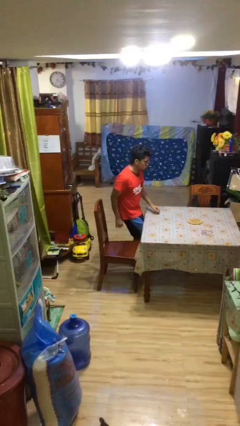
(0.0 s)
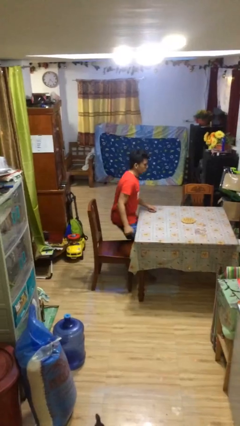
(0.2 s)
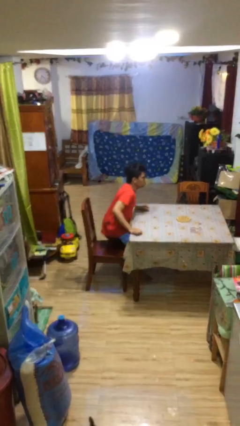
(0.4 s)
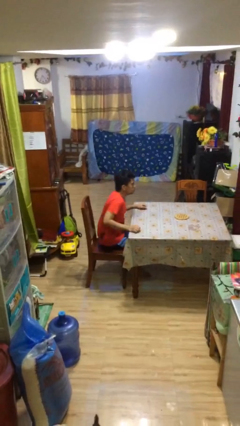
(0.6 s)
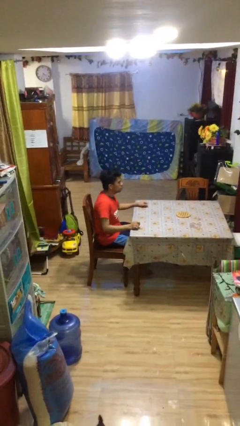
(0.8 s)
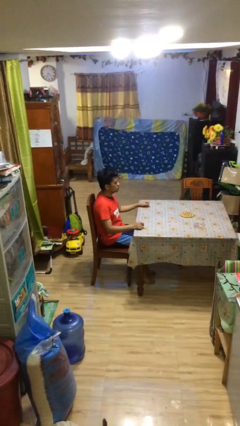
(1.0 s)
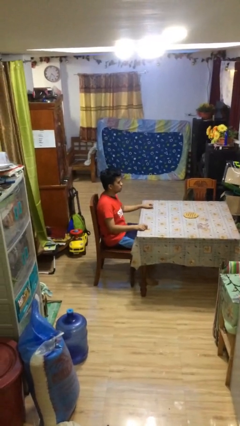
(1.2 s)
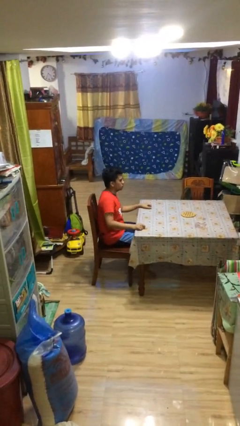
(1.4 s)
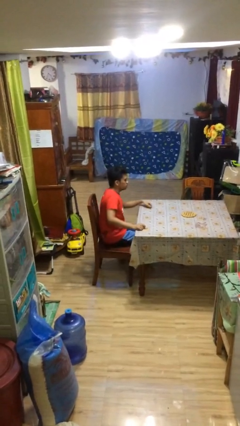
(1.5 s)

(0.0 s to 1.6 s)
person sits down

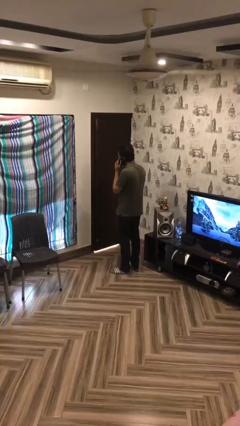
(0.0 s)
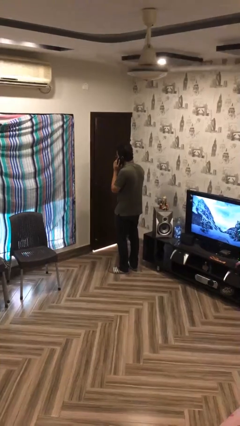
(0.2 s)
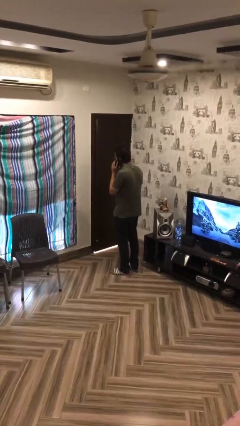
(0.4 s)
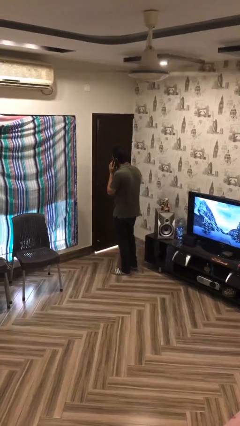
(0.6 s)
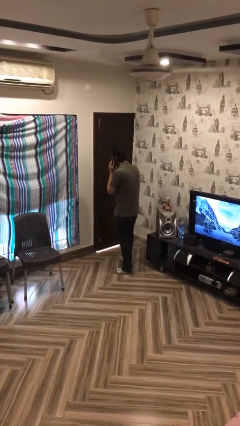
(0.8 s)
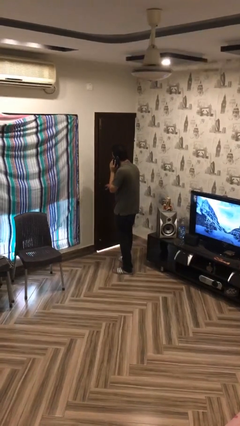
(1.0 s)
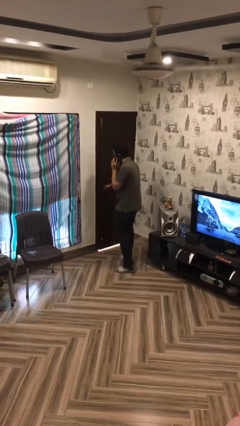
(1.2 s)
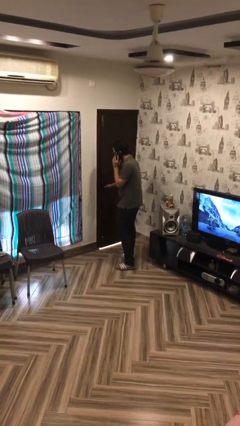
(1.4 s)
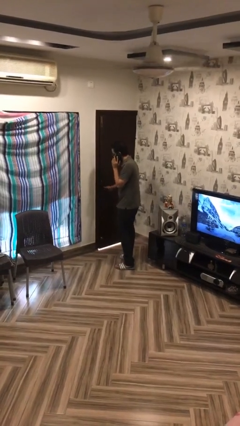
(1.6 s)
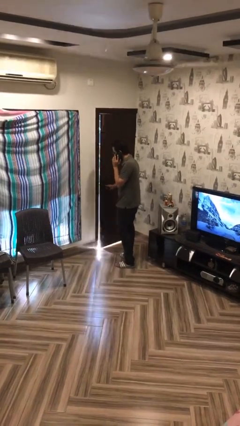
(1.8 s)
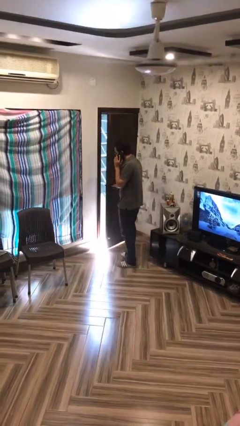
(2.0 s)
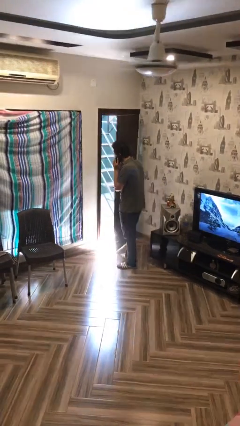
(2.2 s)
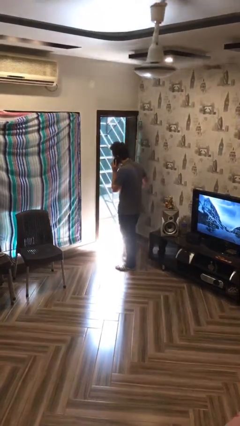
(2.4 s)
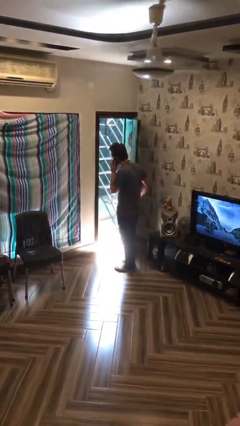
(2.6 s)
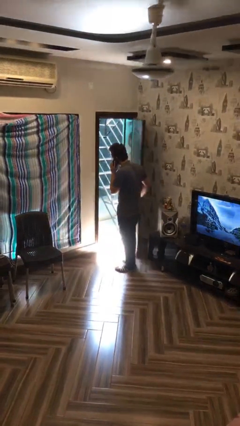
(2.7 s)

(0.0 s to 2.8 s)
person opens facility door

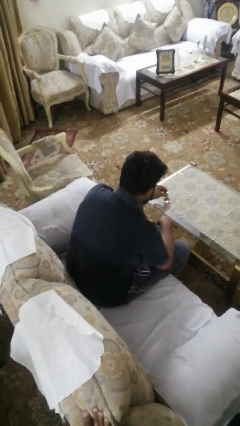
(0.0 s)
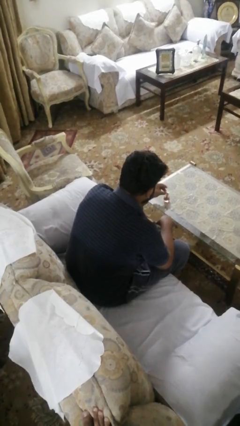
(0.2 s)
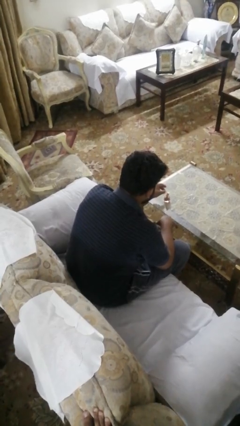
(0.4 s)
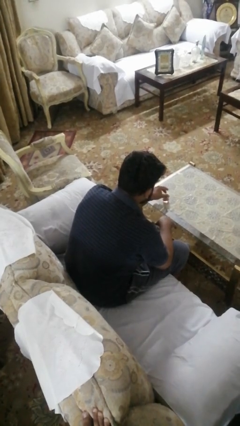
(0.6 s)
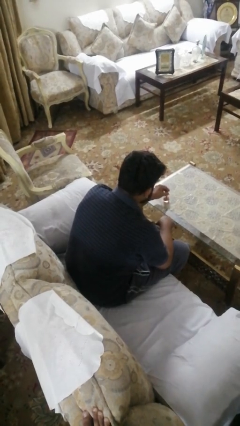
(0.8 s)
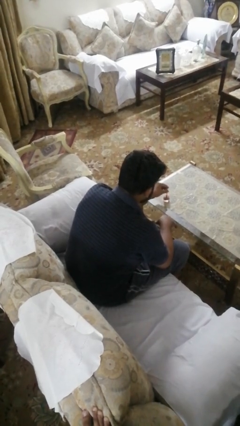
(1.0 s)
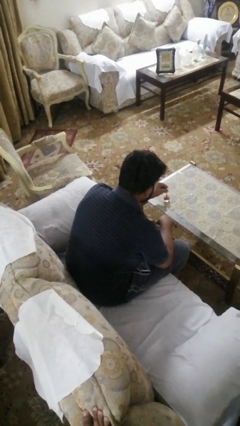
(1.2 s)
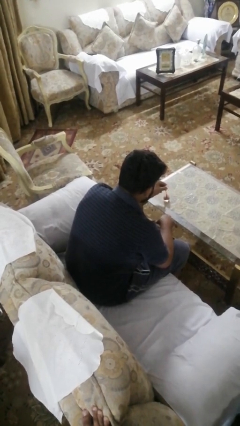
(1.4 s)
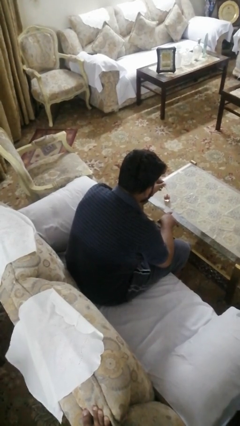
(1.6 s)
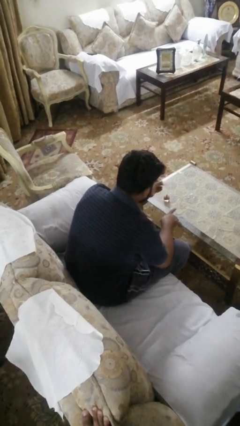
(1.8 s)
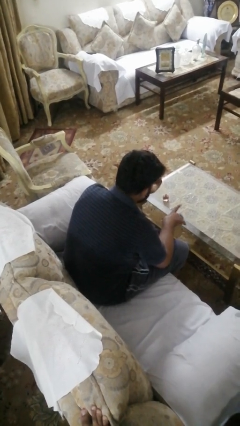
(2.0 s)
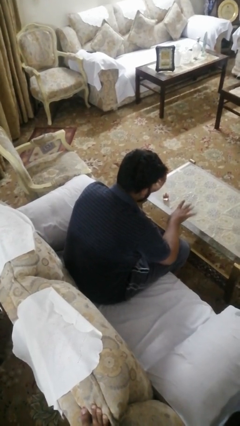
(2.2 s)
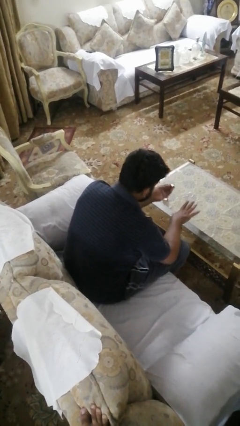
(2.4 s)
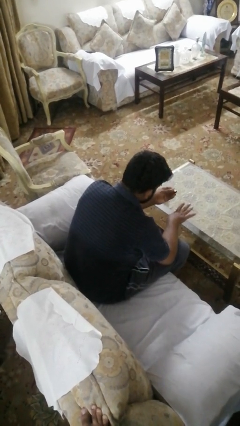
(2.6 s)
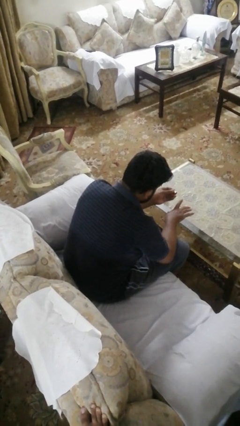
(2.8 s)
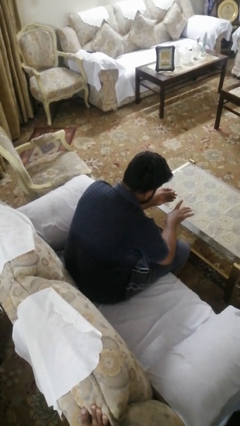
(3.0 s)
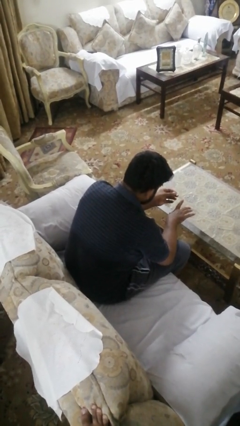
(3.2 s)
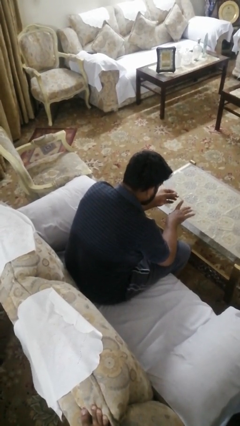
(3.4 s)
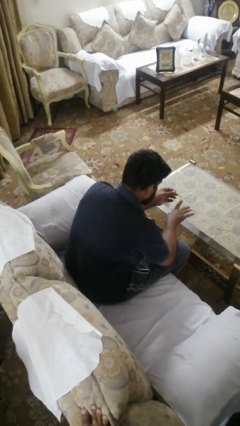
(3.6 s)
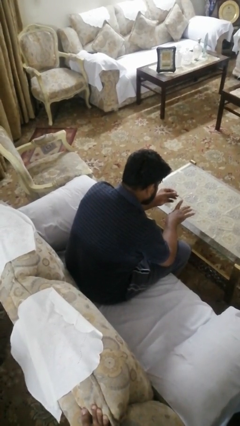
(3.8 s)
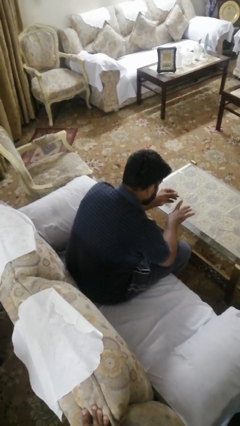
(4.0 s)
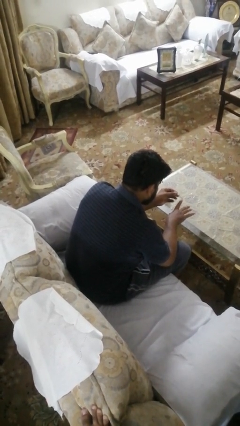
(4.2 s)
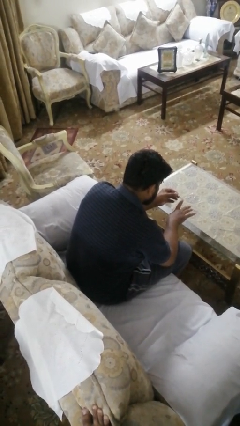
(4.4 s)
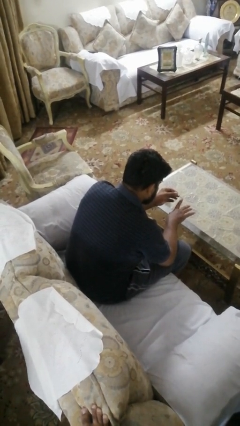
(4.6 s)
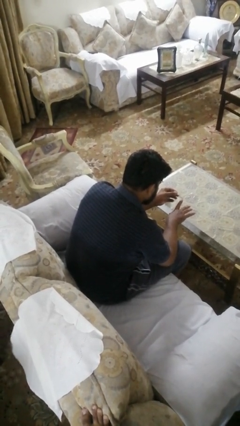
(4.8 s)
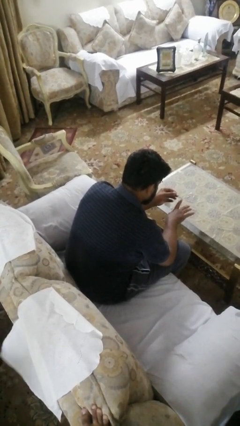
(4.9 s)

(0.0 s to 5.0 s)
person paints fingernails

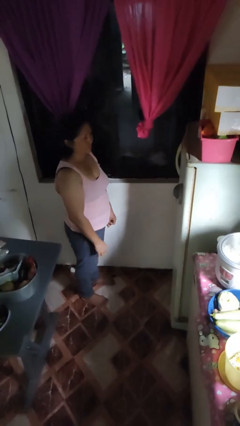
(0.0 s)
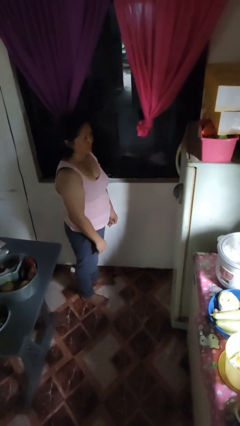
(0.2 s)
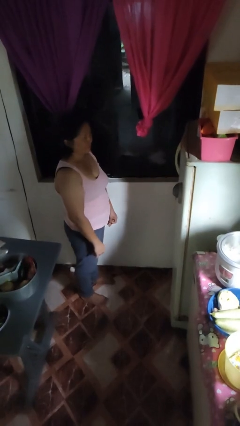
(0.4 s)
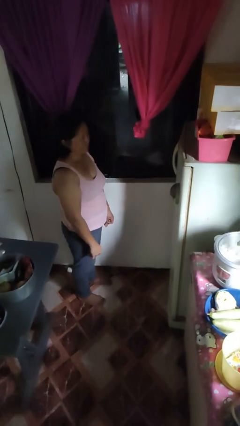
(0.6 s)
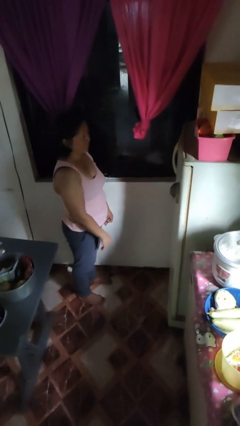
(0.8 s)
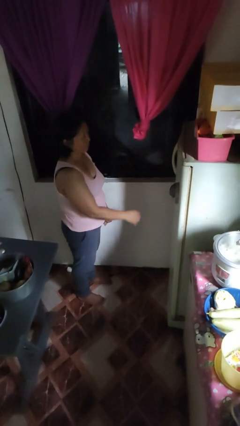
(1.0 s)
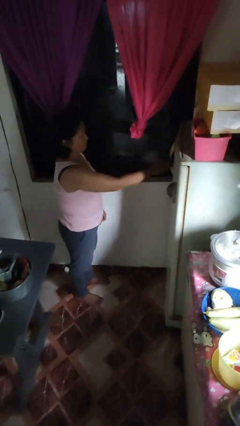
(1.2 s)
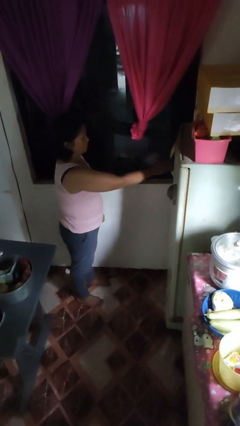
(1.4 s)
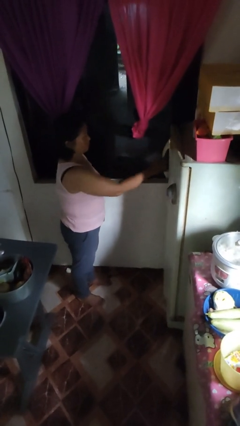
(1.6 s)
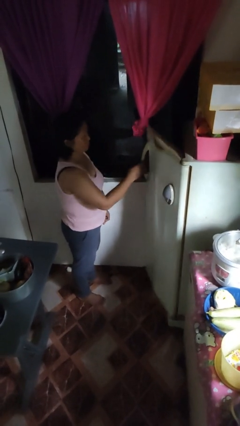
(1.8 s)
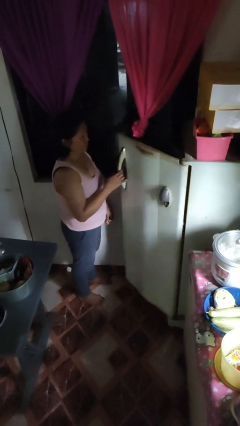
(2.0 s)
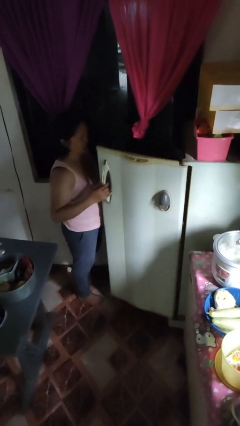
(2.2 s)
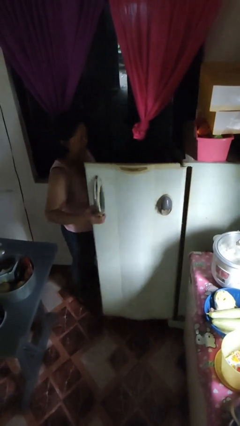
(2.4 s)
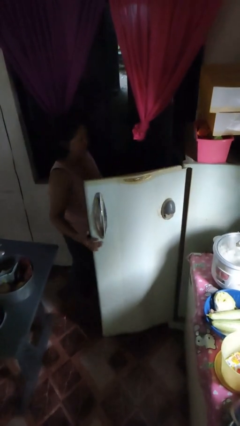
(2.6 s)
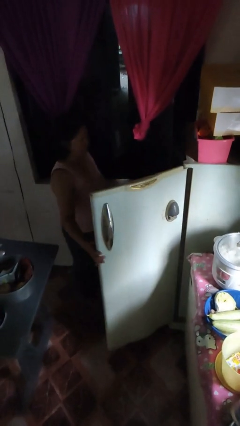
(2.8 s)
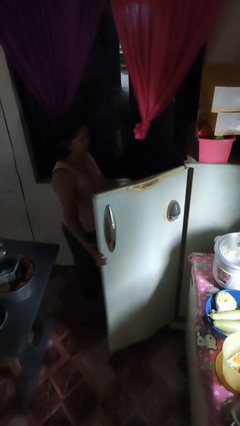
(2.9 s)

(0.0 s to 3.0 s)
person opens refrigerator

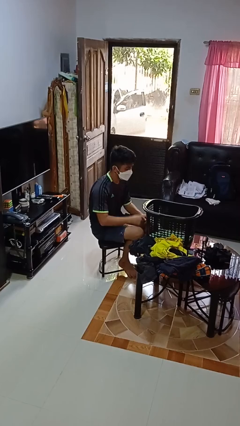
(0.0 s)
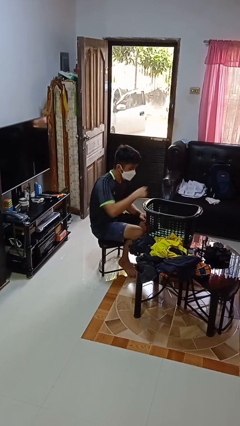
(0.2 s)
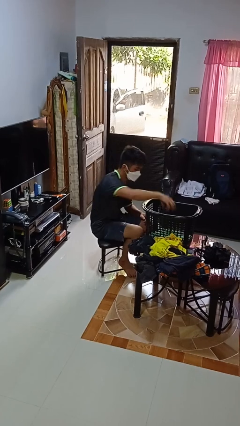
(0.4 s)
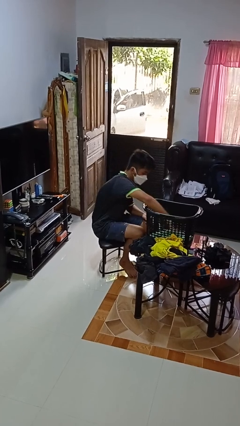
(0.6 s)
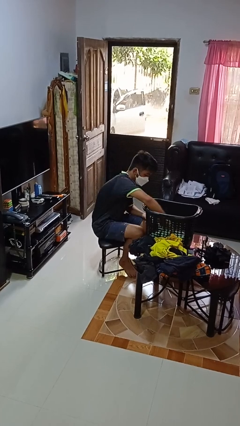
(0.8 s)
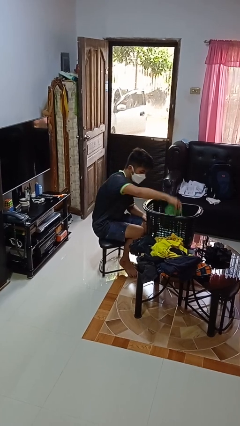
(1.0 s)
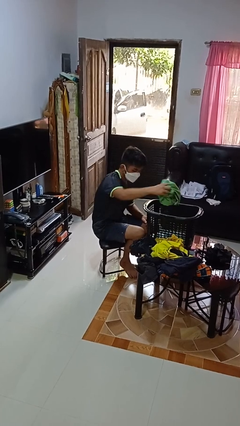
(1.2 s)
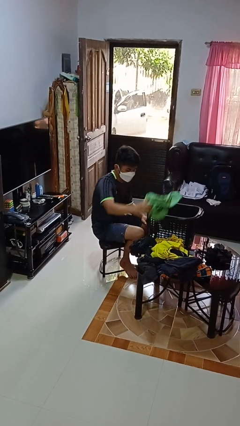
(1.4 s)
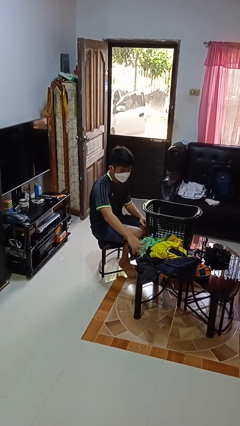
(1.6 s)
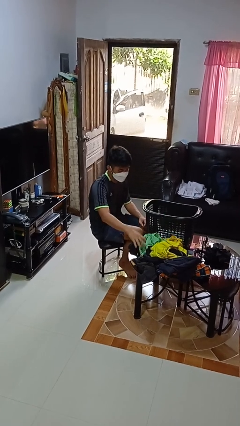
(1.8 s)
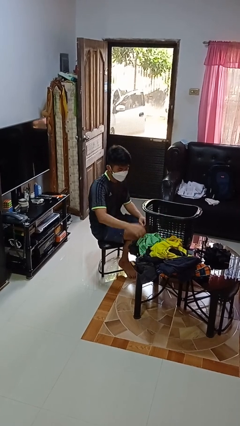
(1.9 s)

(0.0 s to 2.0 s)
person takes object from basket

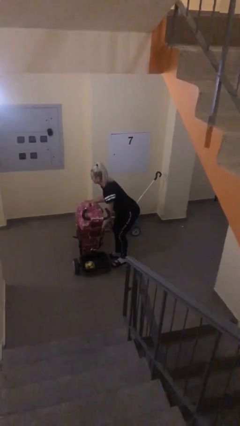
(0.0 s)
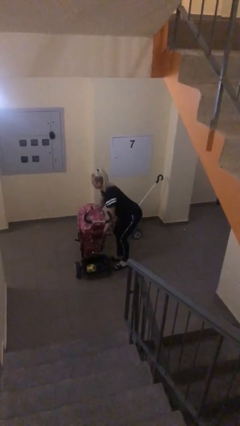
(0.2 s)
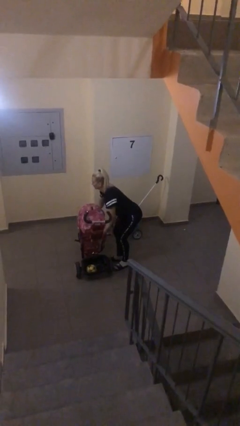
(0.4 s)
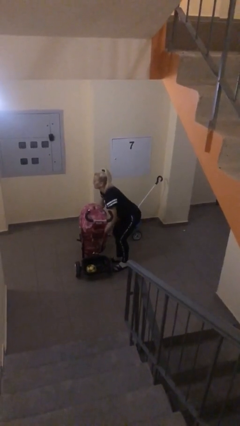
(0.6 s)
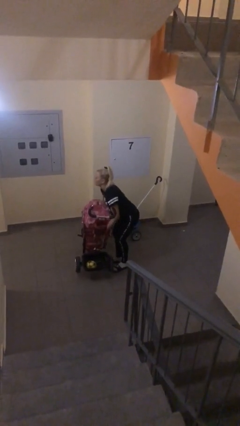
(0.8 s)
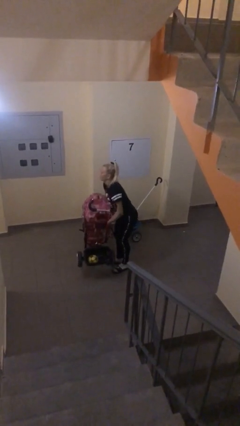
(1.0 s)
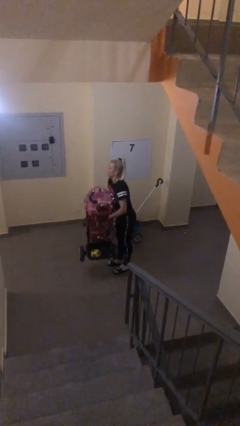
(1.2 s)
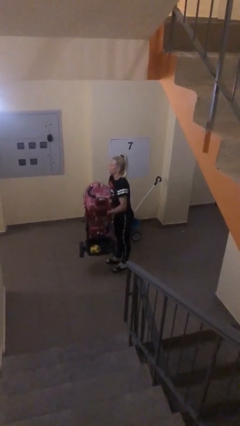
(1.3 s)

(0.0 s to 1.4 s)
person picks up object from floor

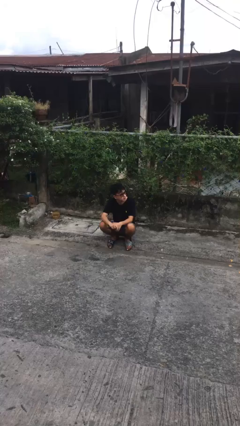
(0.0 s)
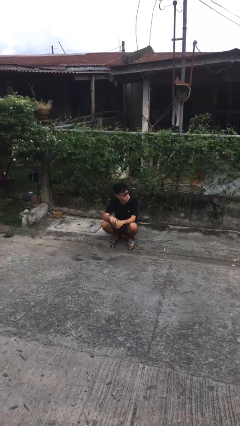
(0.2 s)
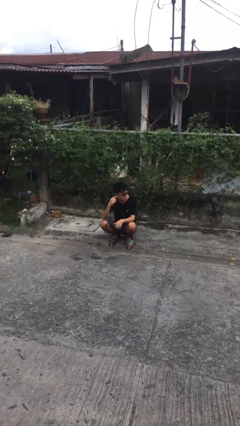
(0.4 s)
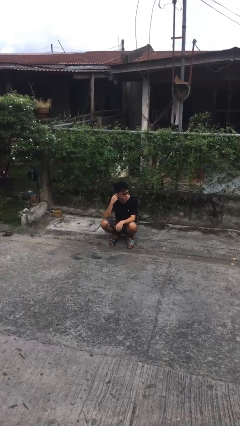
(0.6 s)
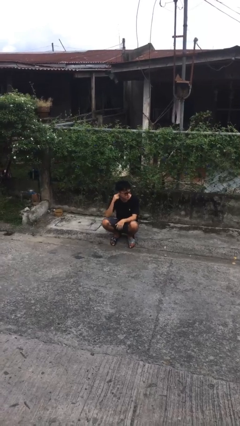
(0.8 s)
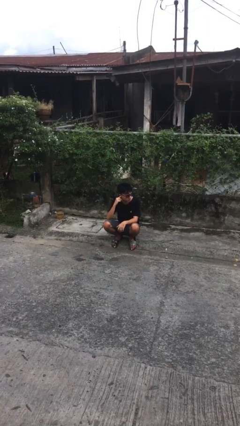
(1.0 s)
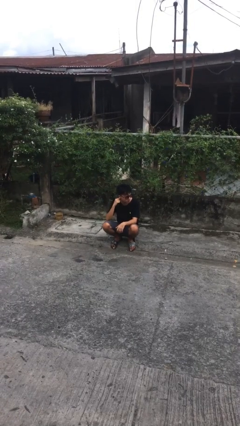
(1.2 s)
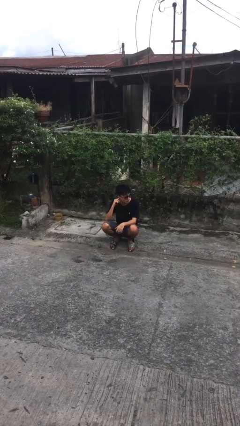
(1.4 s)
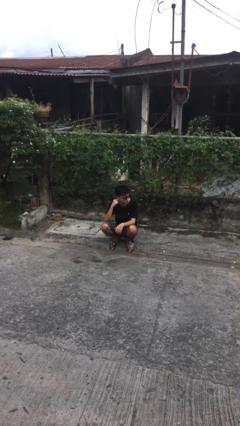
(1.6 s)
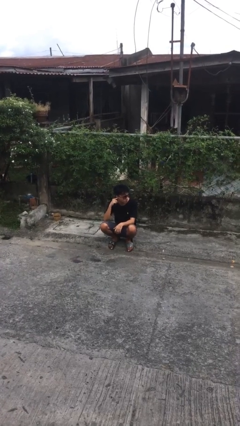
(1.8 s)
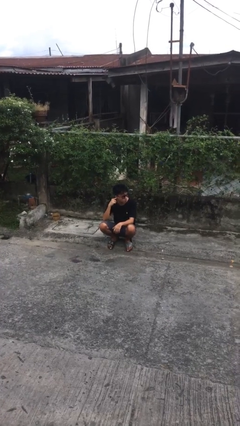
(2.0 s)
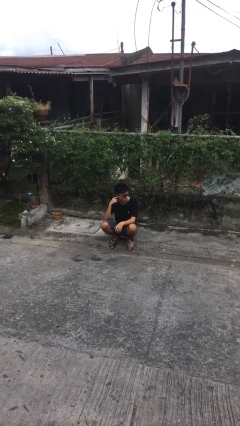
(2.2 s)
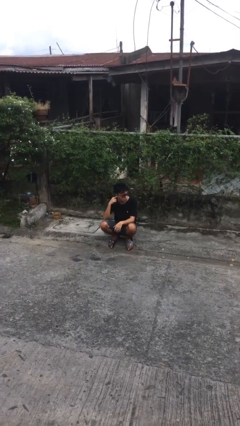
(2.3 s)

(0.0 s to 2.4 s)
person touches earlobe
